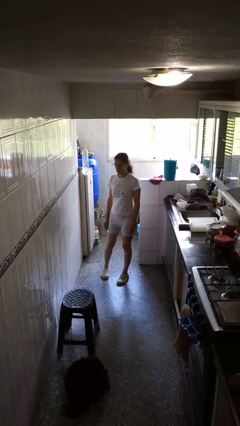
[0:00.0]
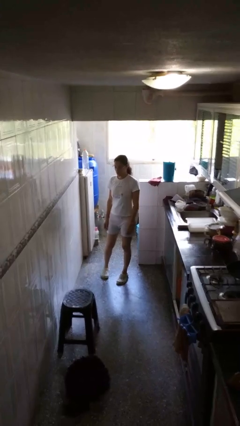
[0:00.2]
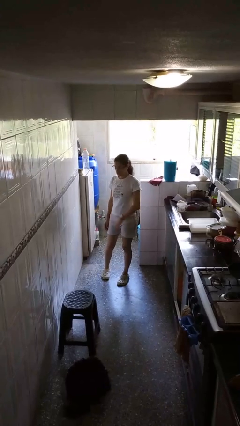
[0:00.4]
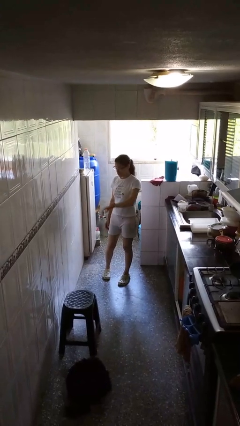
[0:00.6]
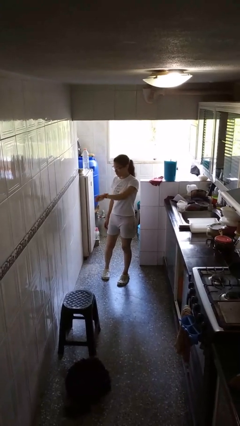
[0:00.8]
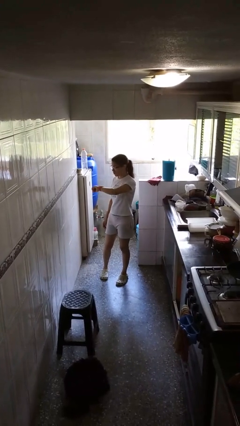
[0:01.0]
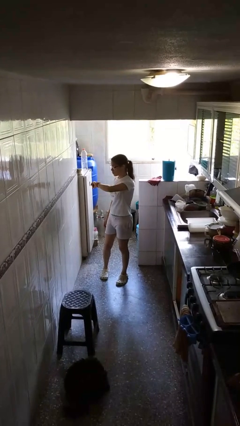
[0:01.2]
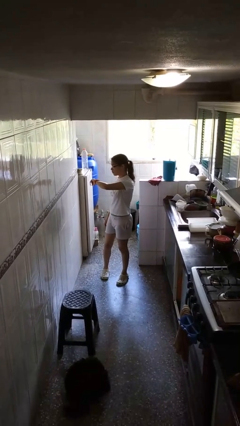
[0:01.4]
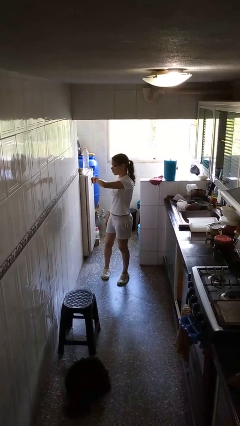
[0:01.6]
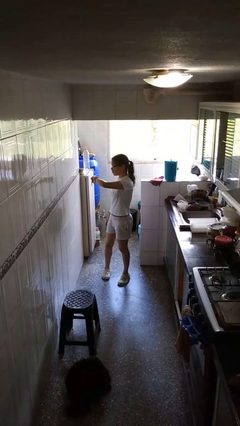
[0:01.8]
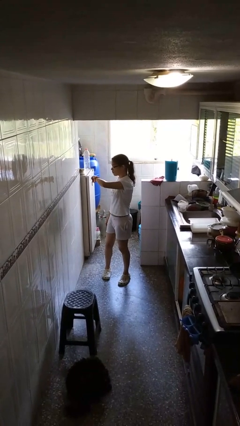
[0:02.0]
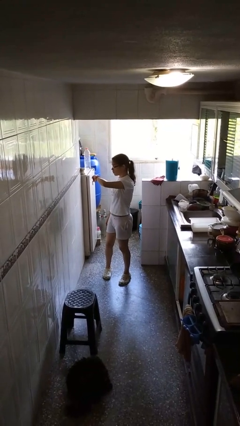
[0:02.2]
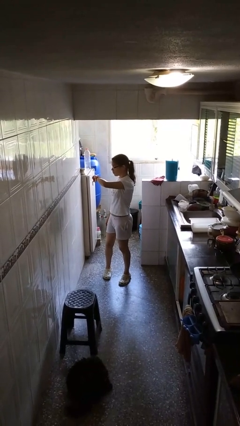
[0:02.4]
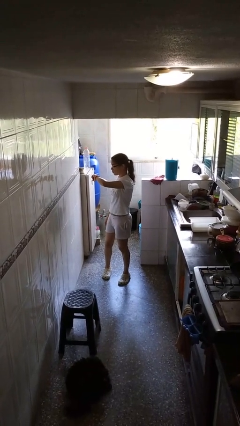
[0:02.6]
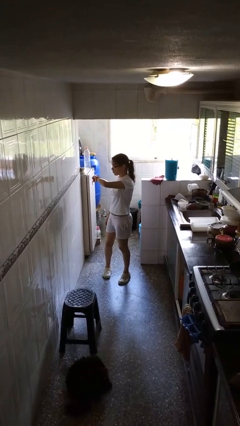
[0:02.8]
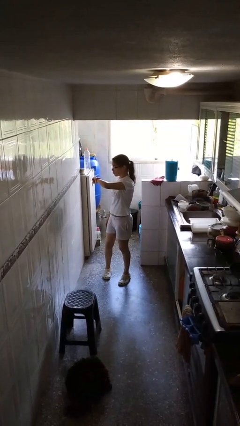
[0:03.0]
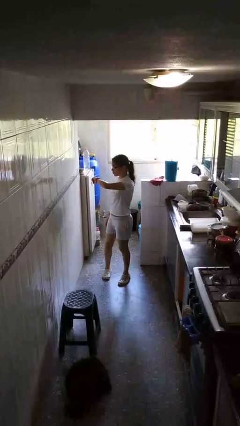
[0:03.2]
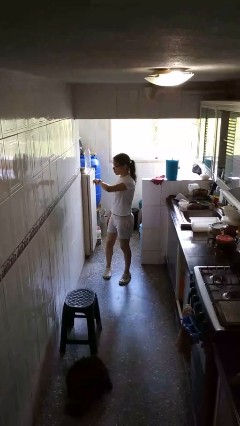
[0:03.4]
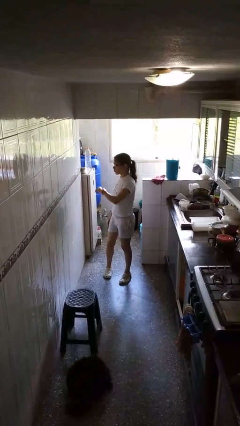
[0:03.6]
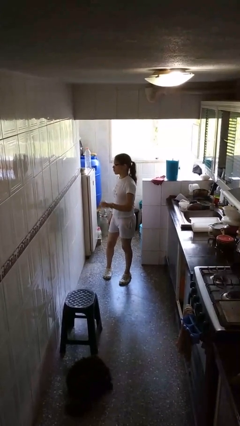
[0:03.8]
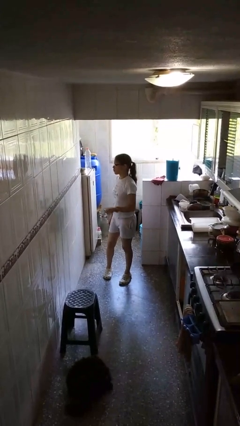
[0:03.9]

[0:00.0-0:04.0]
person looks at wristwatch

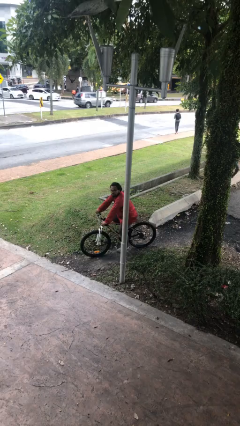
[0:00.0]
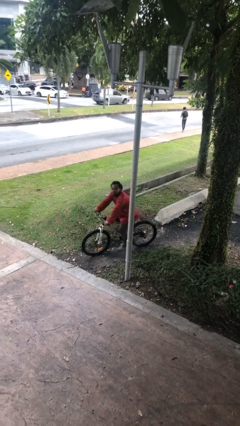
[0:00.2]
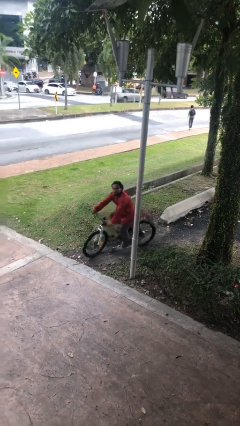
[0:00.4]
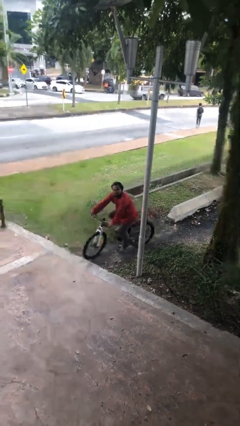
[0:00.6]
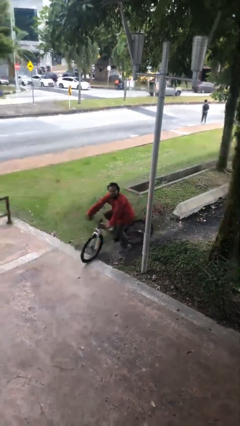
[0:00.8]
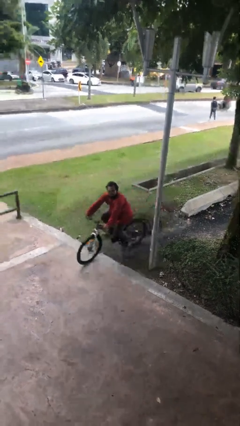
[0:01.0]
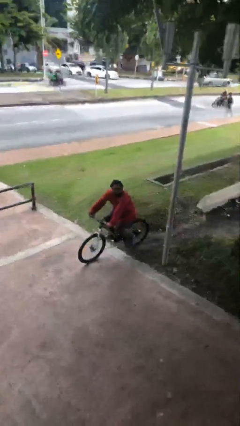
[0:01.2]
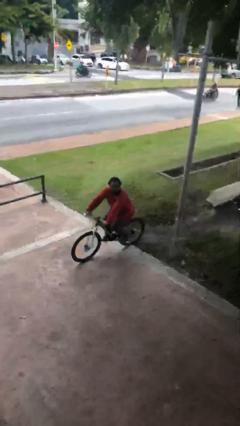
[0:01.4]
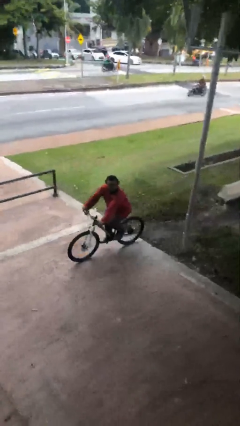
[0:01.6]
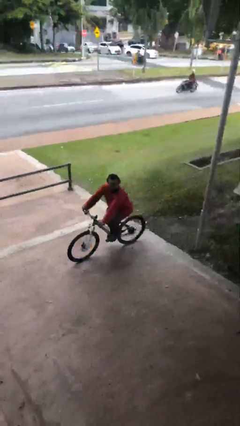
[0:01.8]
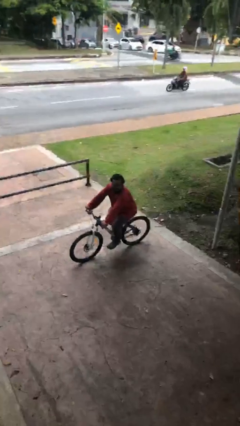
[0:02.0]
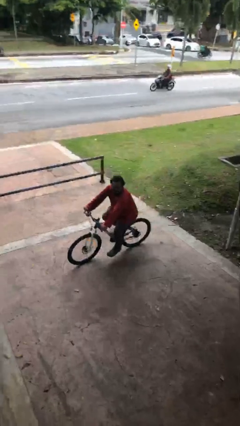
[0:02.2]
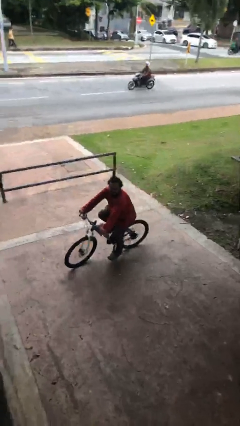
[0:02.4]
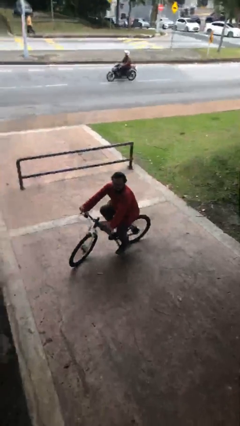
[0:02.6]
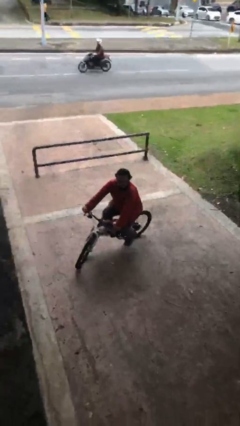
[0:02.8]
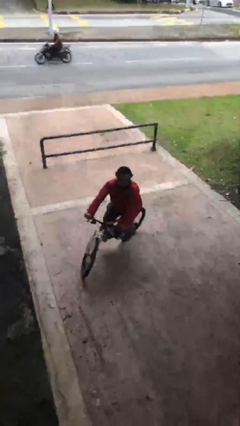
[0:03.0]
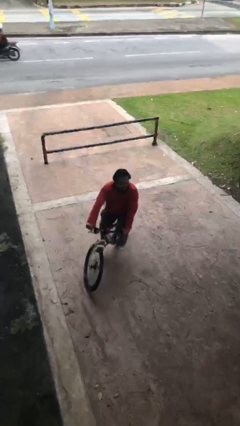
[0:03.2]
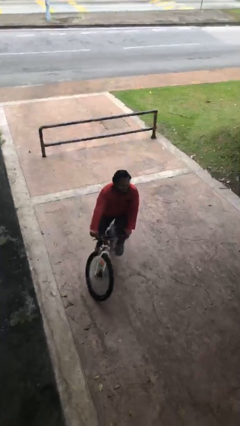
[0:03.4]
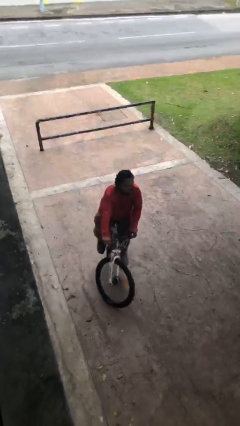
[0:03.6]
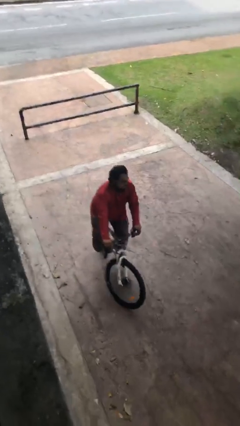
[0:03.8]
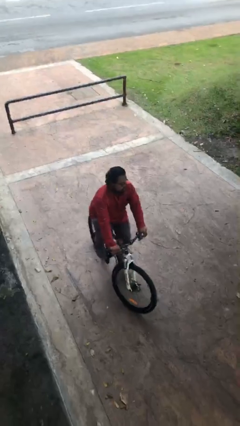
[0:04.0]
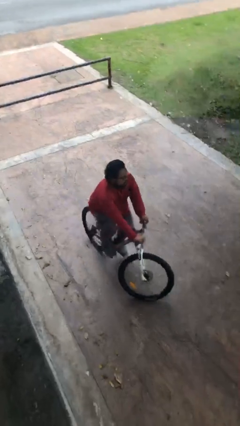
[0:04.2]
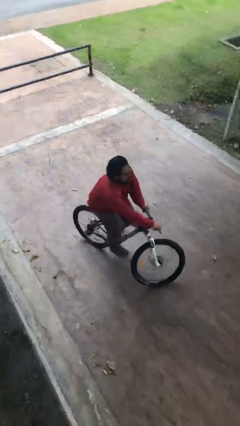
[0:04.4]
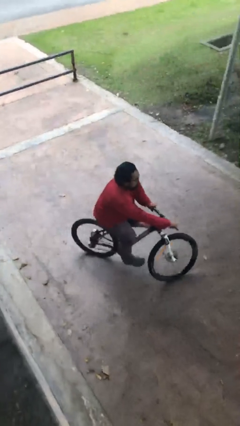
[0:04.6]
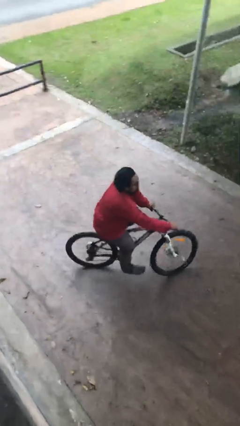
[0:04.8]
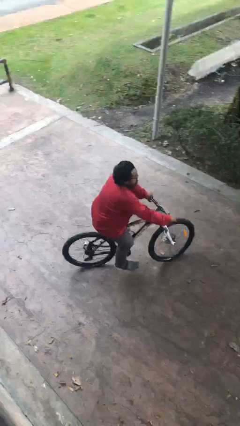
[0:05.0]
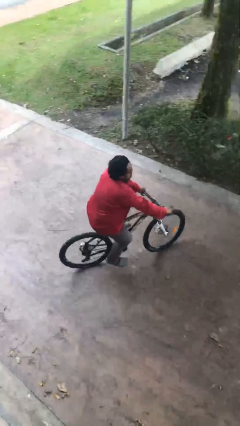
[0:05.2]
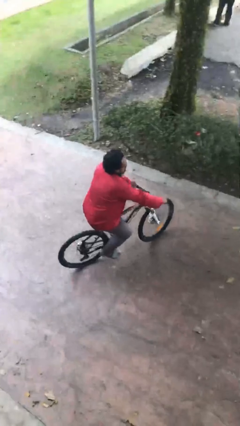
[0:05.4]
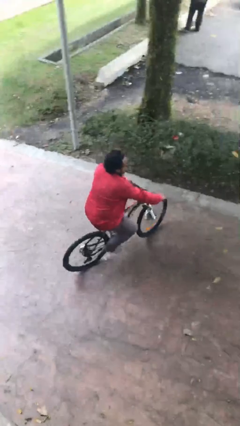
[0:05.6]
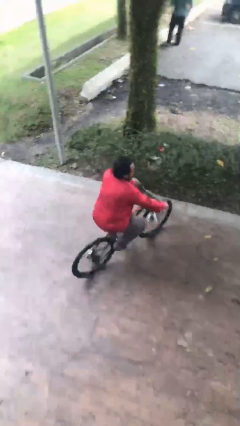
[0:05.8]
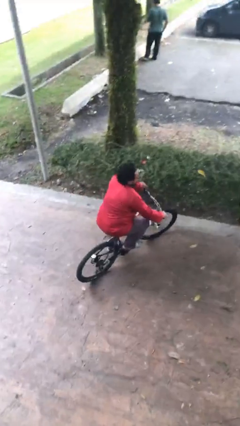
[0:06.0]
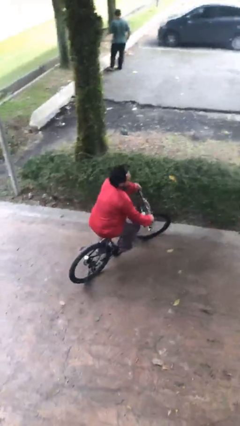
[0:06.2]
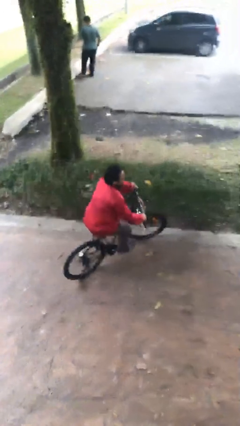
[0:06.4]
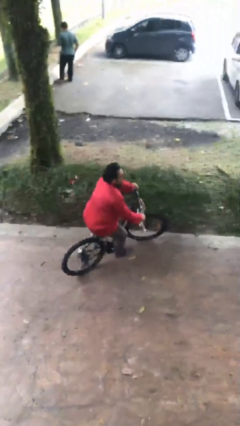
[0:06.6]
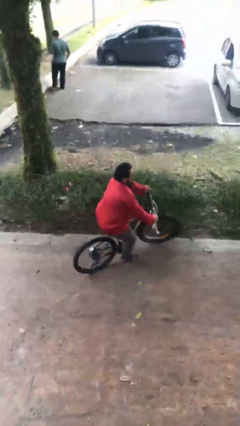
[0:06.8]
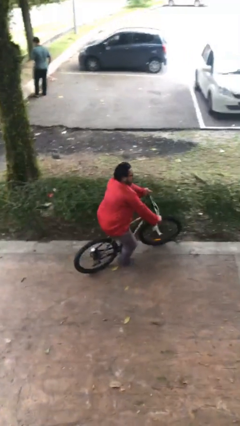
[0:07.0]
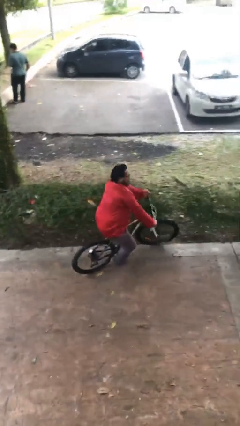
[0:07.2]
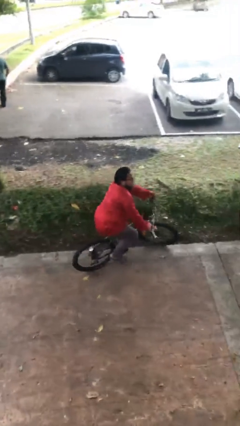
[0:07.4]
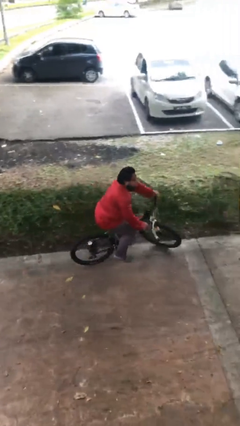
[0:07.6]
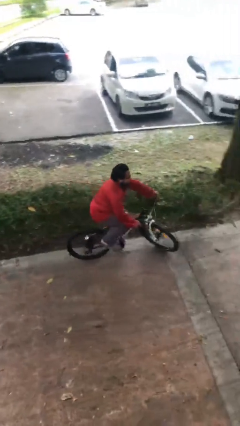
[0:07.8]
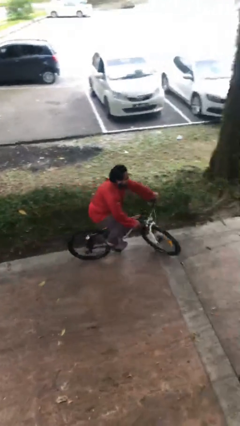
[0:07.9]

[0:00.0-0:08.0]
person rides bicycle

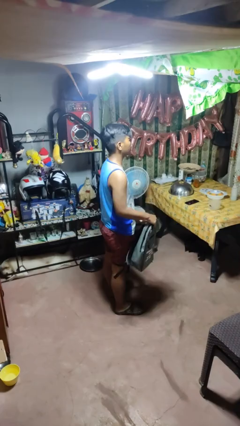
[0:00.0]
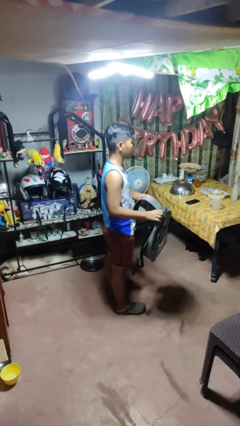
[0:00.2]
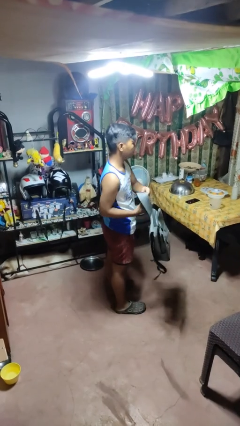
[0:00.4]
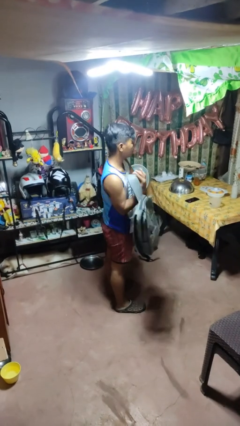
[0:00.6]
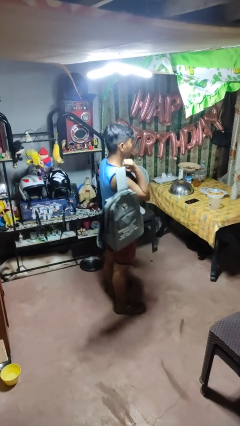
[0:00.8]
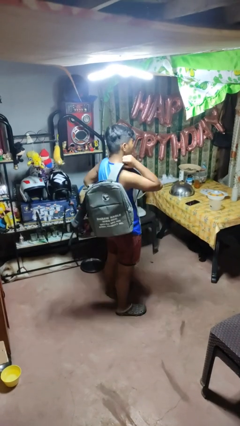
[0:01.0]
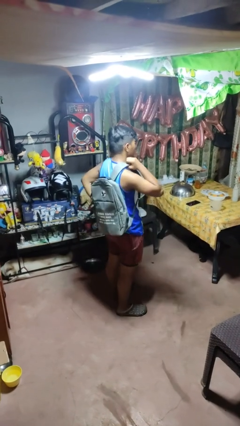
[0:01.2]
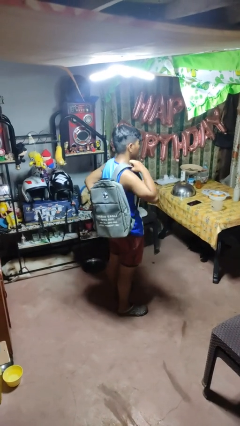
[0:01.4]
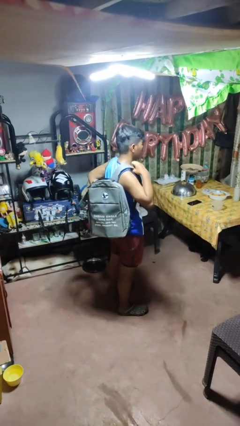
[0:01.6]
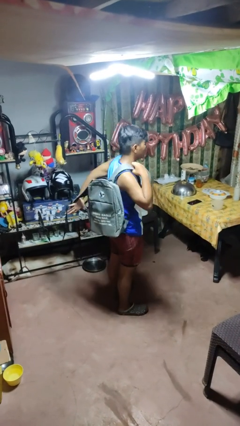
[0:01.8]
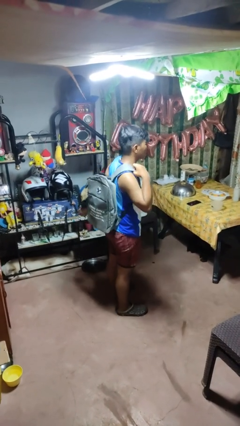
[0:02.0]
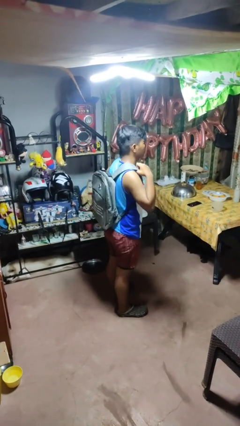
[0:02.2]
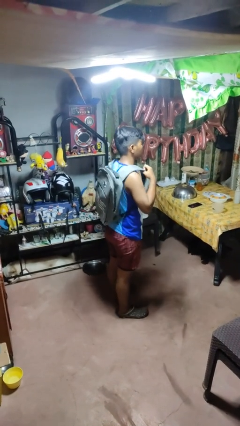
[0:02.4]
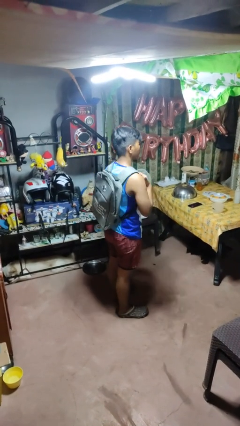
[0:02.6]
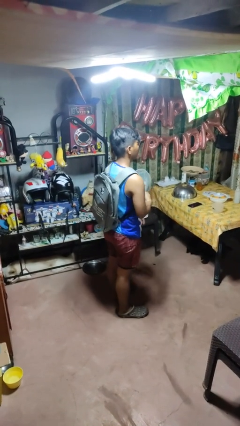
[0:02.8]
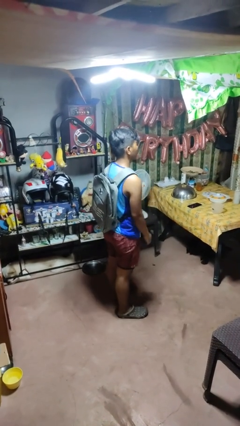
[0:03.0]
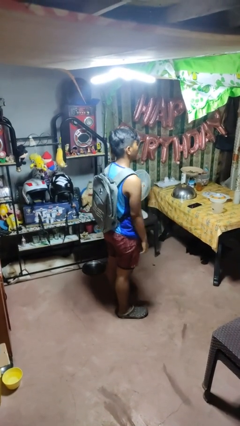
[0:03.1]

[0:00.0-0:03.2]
person puts on backpack

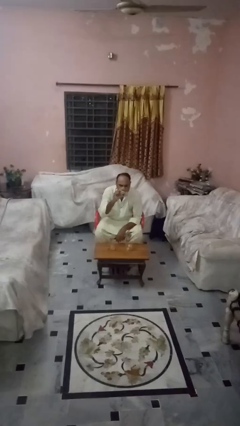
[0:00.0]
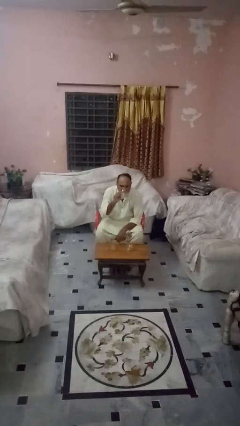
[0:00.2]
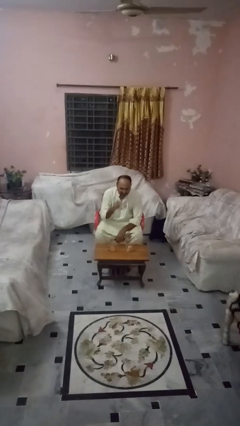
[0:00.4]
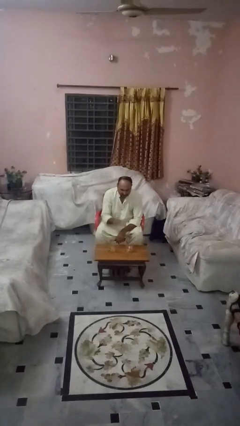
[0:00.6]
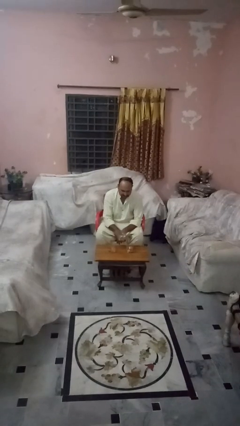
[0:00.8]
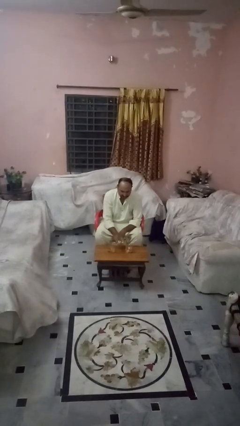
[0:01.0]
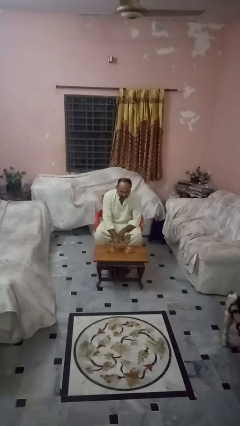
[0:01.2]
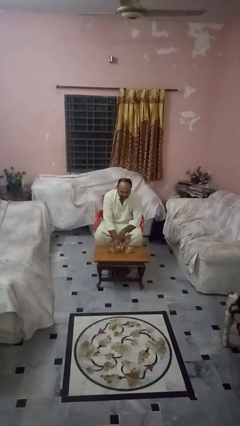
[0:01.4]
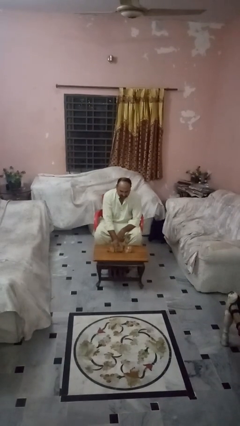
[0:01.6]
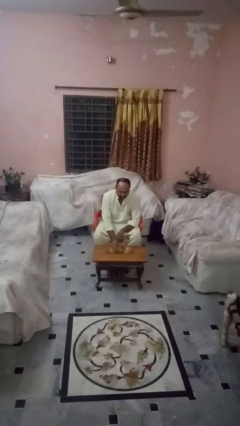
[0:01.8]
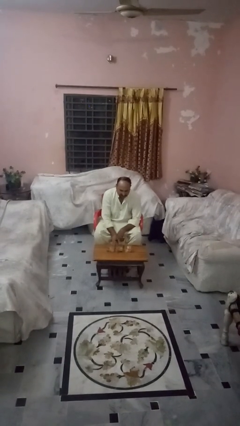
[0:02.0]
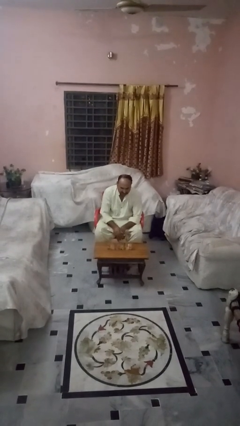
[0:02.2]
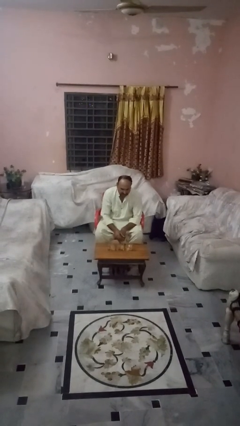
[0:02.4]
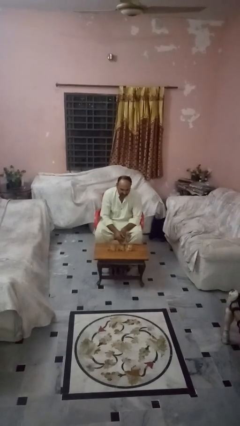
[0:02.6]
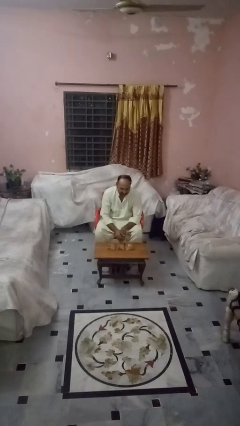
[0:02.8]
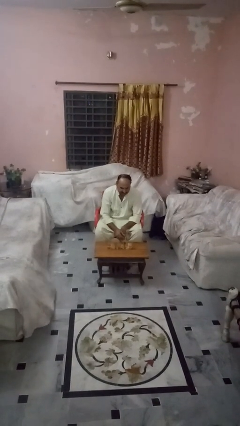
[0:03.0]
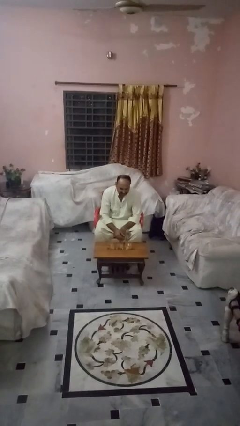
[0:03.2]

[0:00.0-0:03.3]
person puts down object on table
